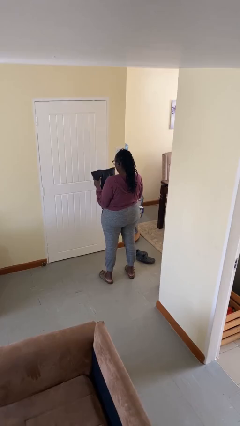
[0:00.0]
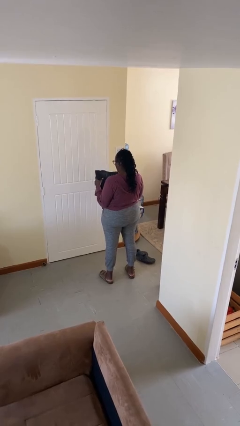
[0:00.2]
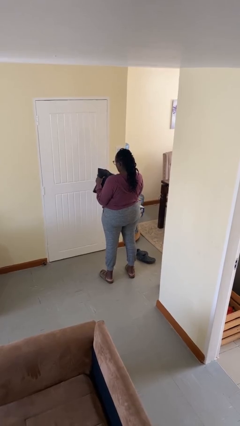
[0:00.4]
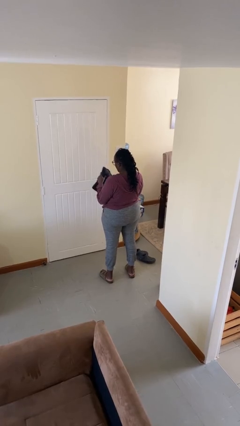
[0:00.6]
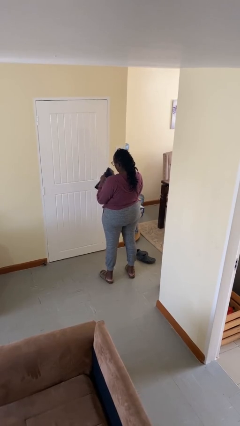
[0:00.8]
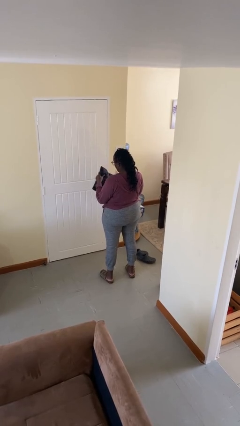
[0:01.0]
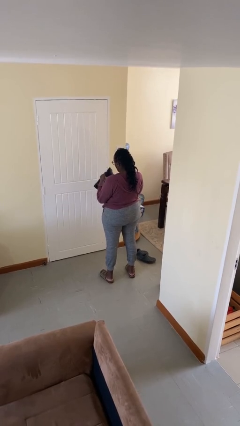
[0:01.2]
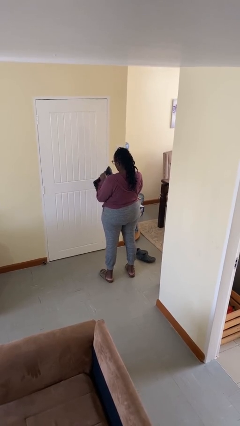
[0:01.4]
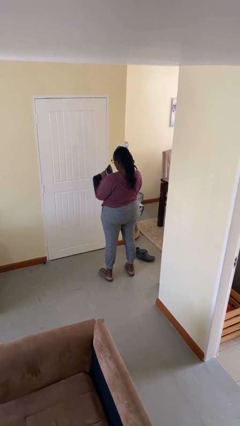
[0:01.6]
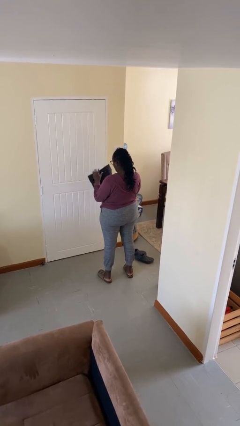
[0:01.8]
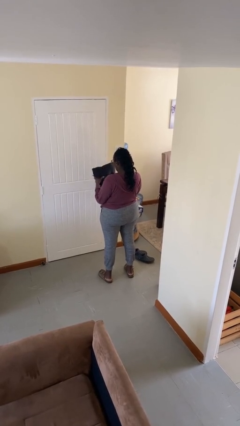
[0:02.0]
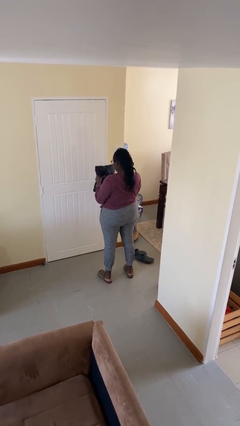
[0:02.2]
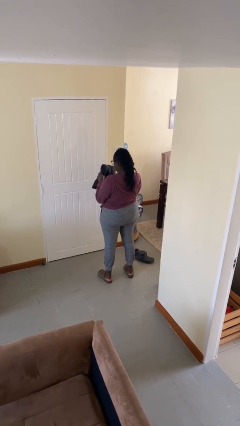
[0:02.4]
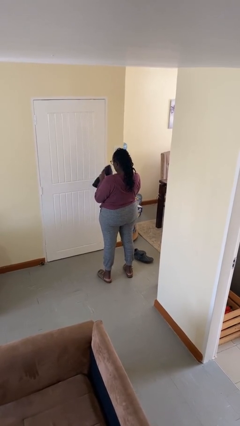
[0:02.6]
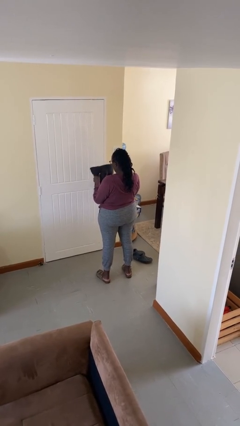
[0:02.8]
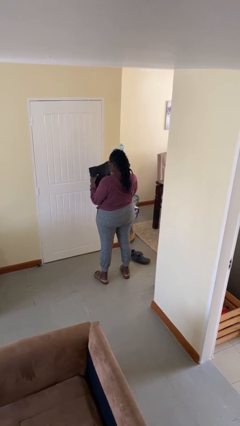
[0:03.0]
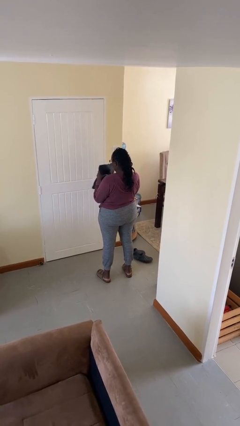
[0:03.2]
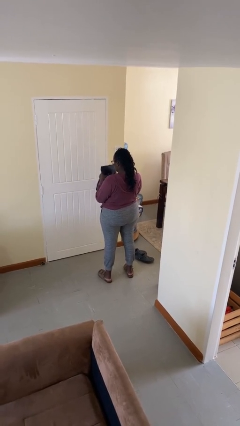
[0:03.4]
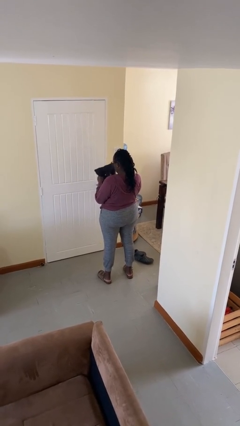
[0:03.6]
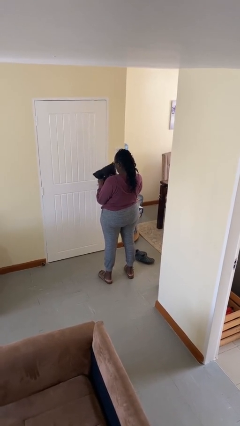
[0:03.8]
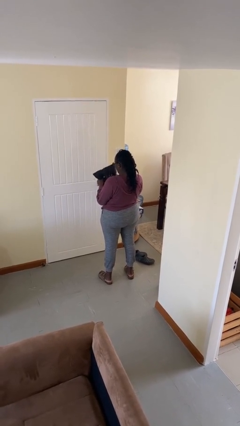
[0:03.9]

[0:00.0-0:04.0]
person squeezes object

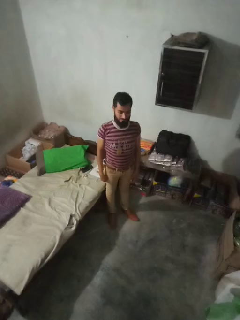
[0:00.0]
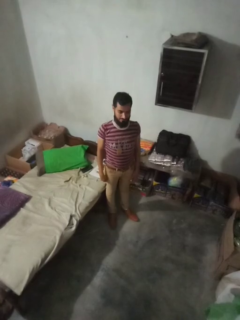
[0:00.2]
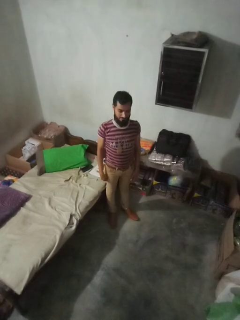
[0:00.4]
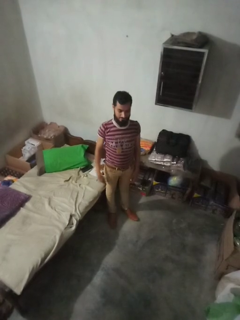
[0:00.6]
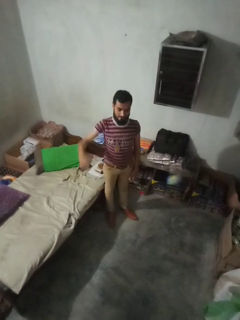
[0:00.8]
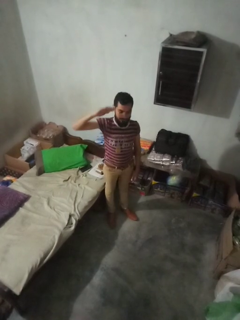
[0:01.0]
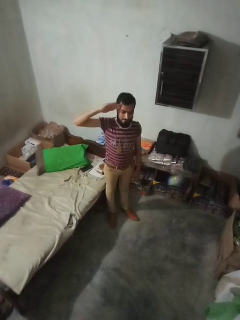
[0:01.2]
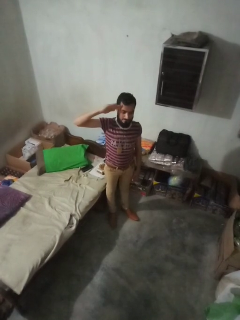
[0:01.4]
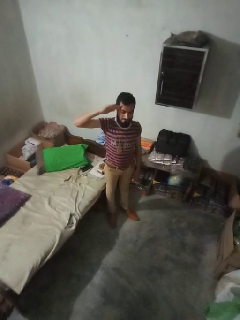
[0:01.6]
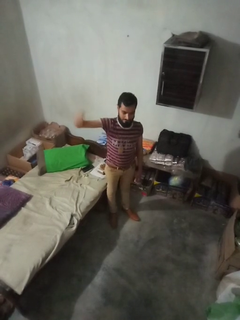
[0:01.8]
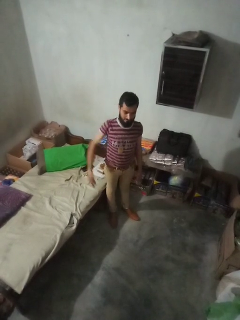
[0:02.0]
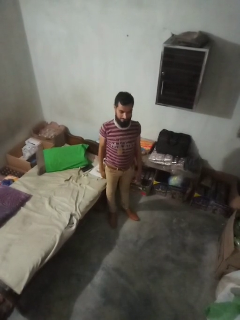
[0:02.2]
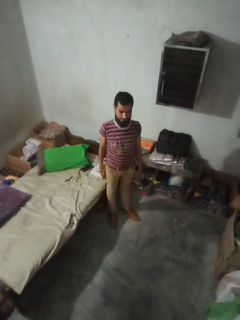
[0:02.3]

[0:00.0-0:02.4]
person salutes

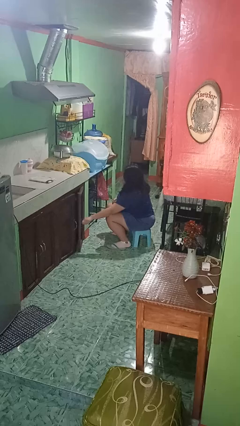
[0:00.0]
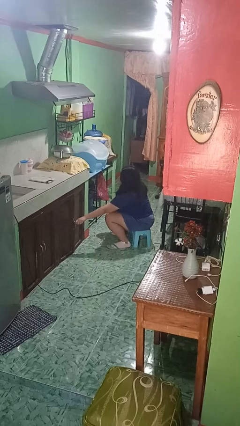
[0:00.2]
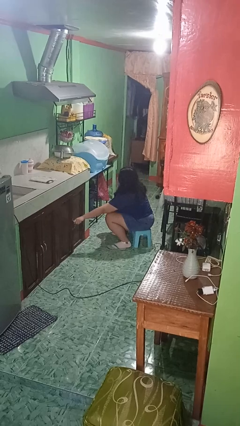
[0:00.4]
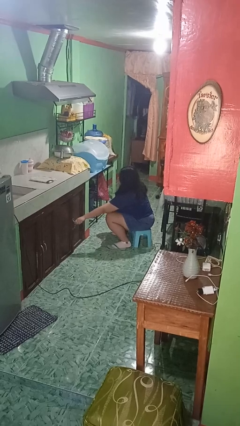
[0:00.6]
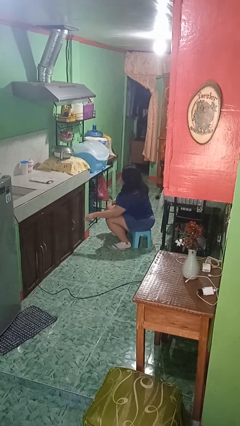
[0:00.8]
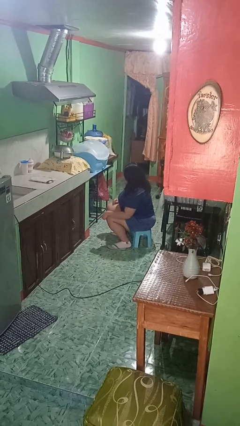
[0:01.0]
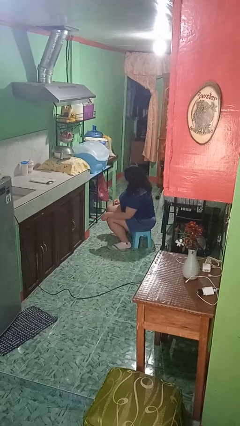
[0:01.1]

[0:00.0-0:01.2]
person closes cabinet

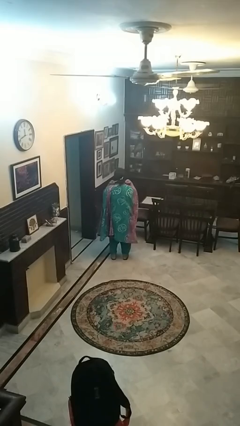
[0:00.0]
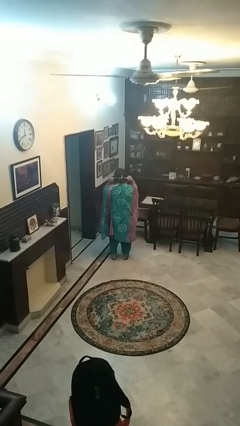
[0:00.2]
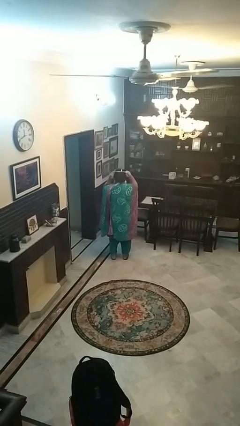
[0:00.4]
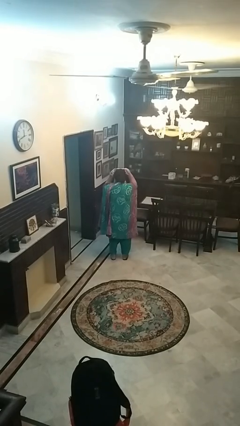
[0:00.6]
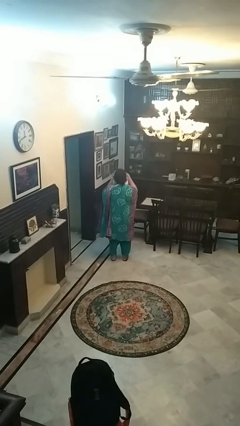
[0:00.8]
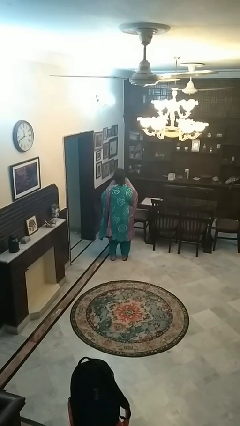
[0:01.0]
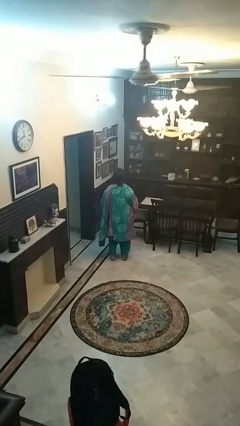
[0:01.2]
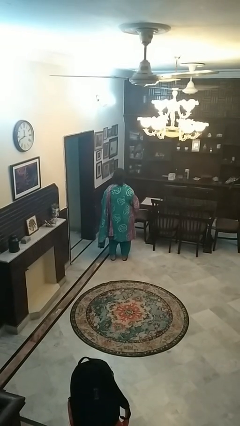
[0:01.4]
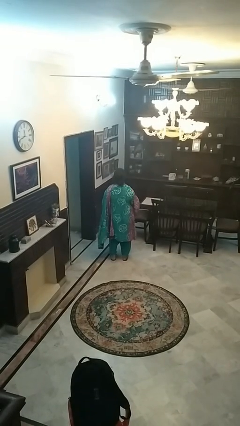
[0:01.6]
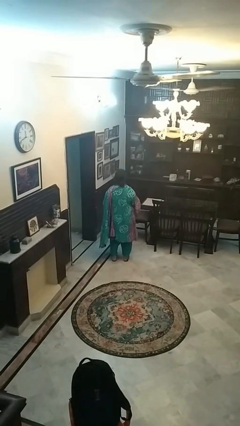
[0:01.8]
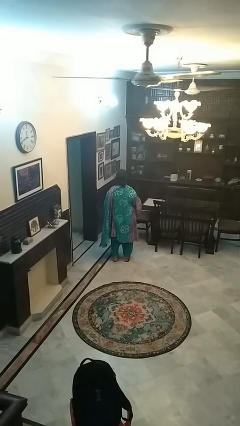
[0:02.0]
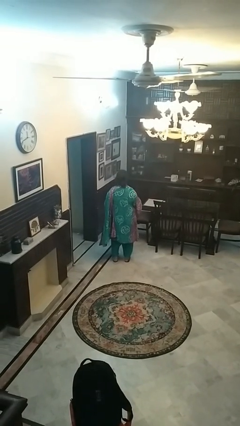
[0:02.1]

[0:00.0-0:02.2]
person takes off apron

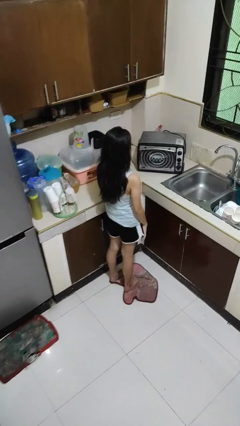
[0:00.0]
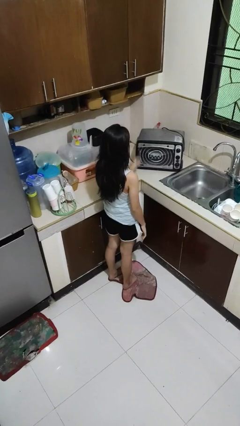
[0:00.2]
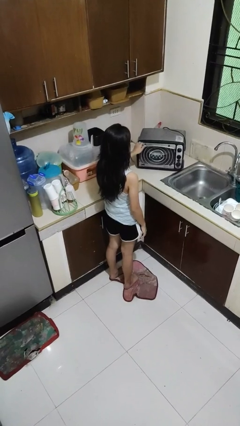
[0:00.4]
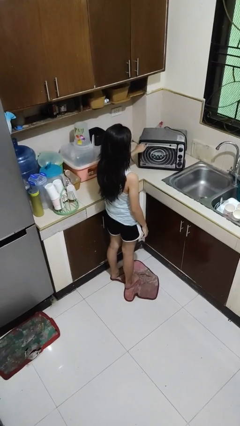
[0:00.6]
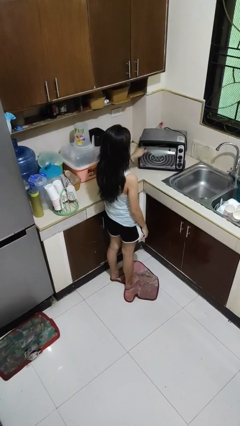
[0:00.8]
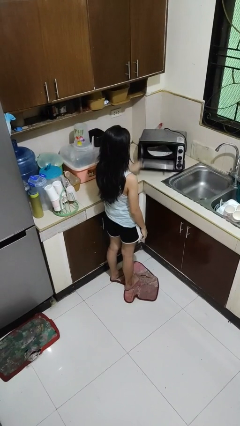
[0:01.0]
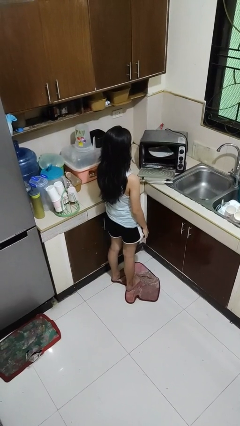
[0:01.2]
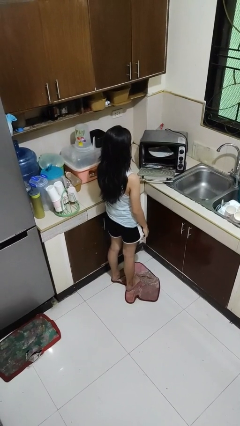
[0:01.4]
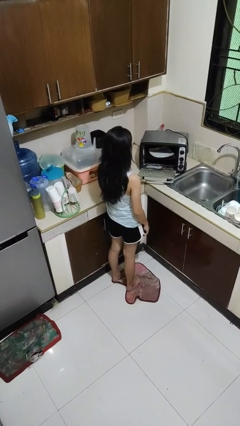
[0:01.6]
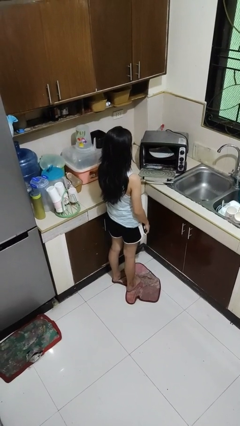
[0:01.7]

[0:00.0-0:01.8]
person opens microwave

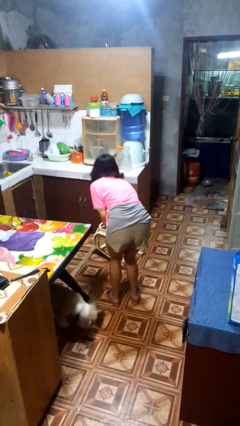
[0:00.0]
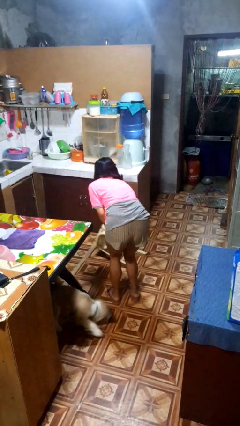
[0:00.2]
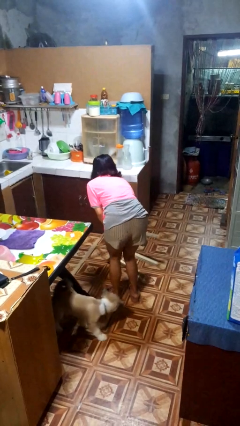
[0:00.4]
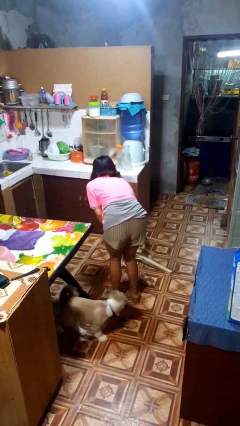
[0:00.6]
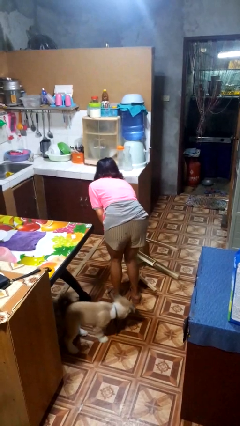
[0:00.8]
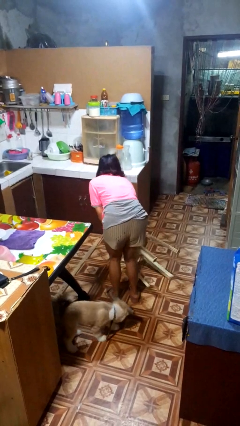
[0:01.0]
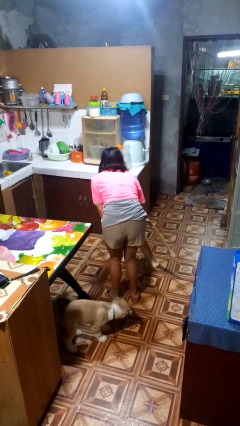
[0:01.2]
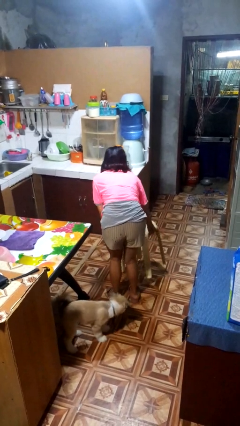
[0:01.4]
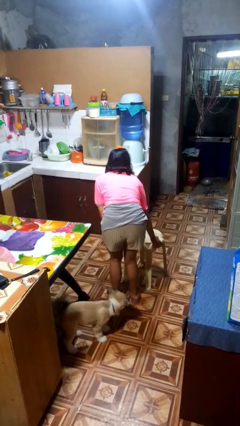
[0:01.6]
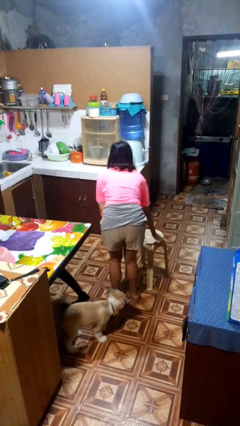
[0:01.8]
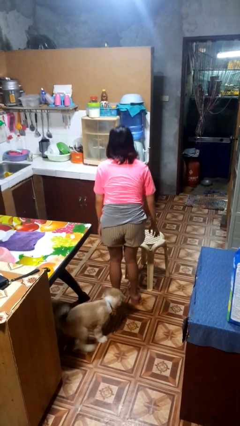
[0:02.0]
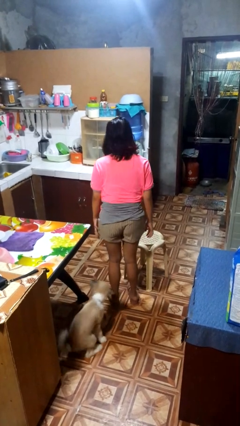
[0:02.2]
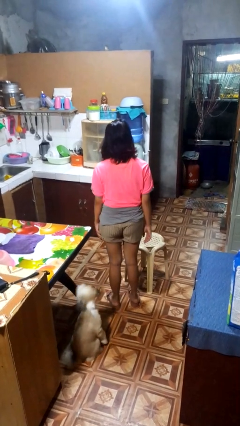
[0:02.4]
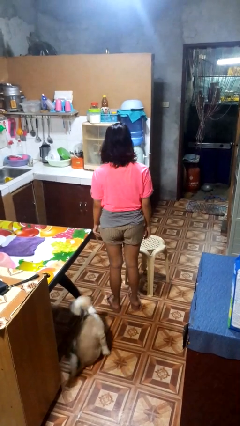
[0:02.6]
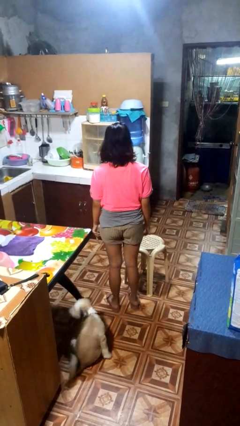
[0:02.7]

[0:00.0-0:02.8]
person sets upright furniture

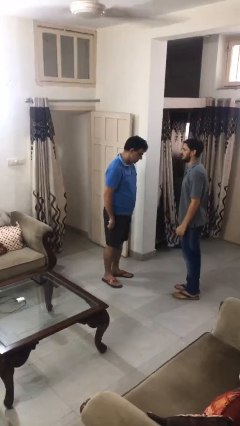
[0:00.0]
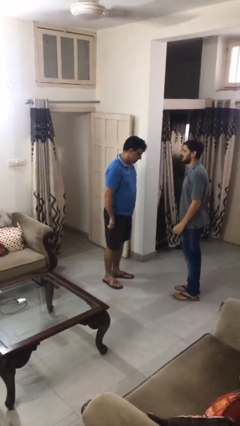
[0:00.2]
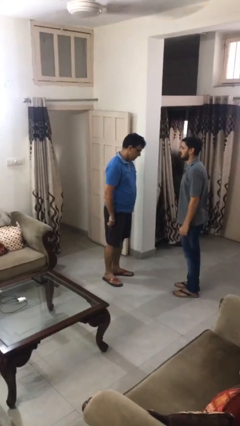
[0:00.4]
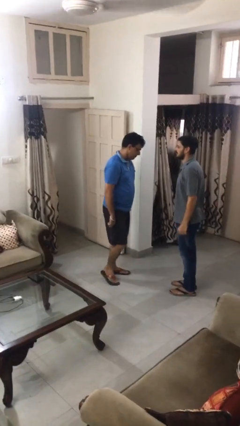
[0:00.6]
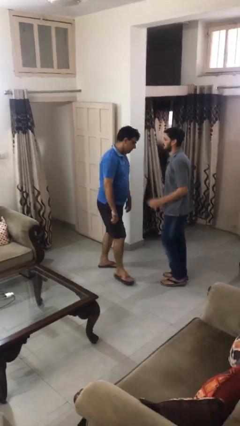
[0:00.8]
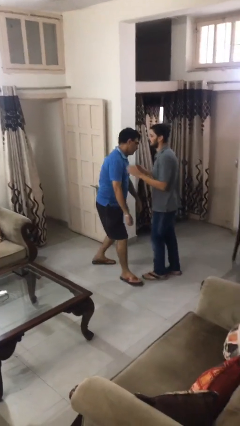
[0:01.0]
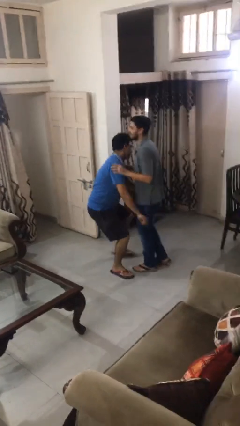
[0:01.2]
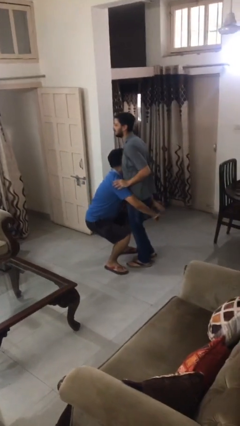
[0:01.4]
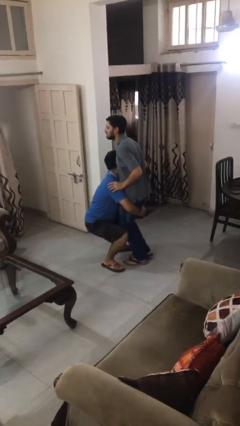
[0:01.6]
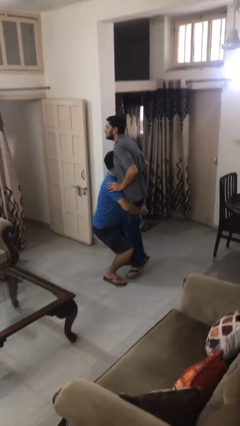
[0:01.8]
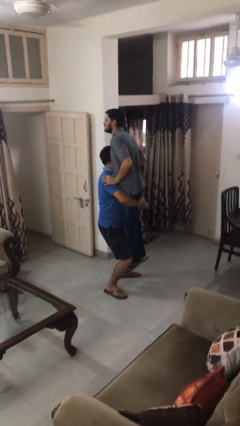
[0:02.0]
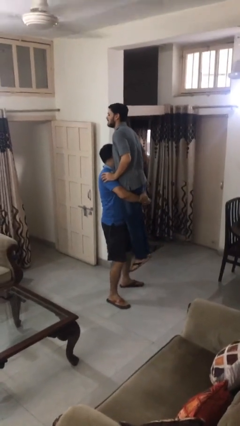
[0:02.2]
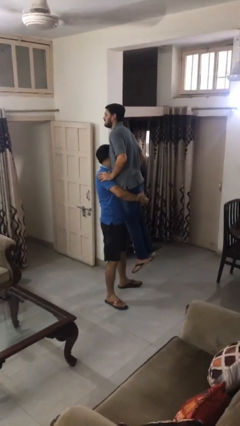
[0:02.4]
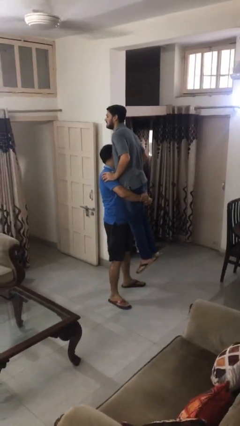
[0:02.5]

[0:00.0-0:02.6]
person picks up person

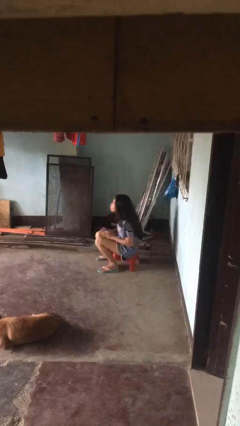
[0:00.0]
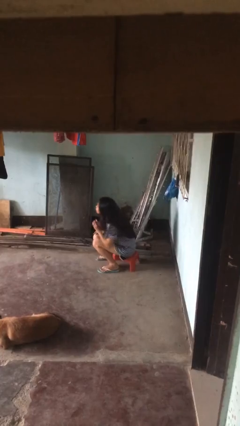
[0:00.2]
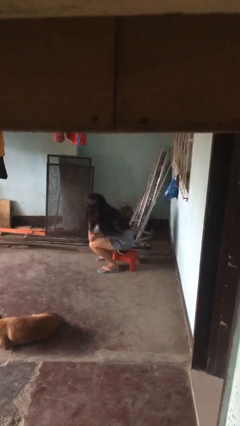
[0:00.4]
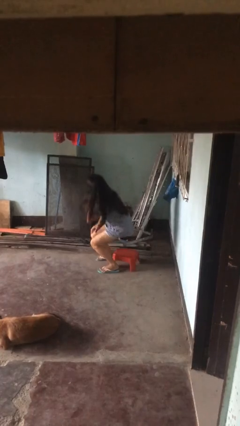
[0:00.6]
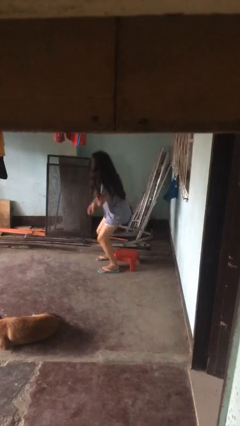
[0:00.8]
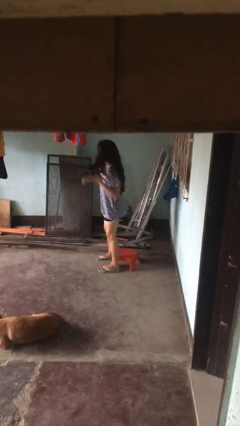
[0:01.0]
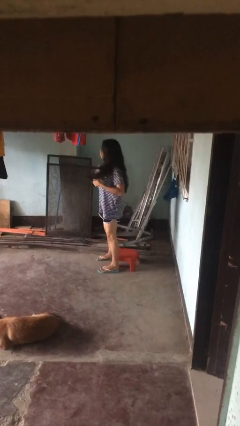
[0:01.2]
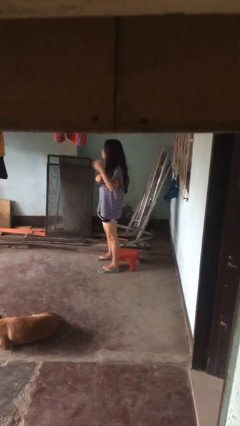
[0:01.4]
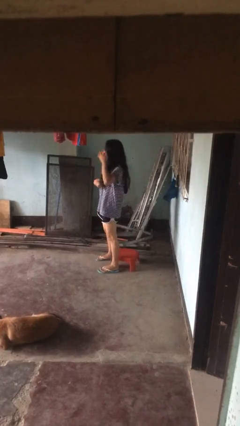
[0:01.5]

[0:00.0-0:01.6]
person stands up
